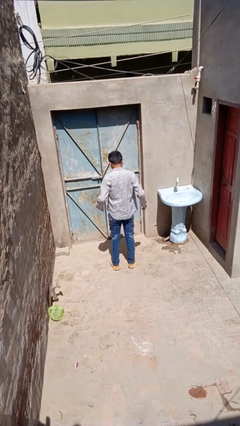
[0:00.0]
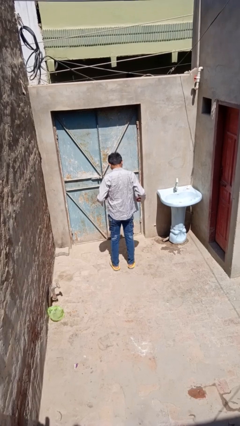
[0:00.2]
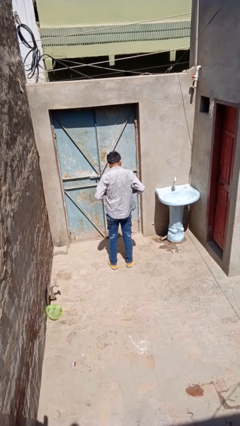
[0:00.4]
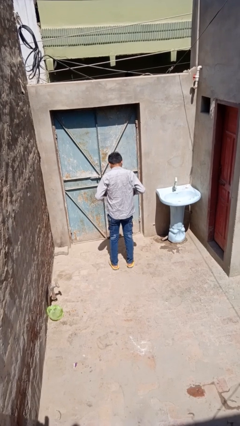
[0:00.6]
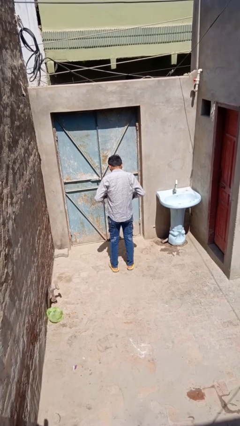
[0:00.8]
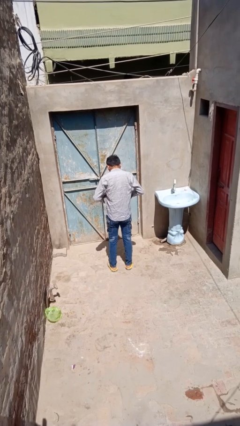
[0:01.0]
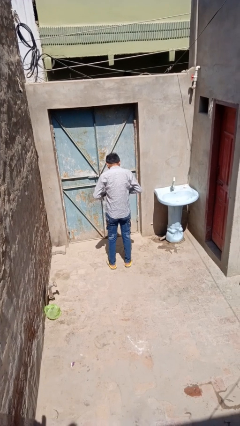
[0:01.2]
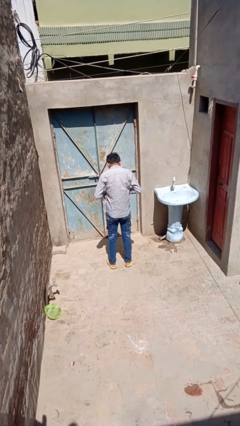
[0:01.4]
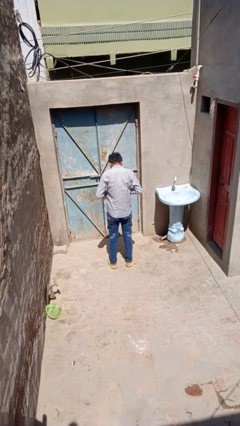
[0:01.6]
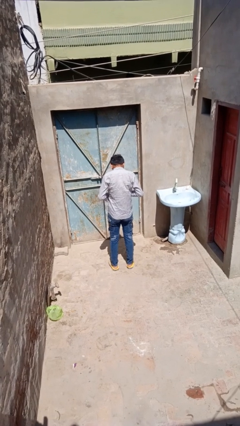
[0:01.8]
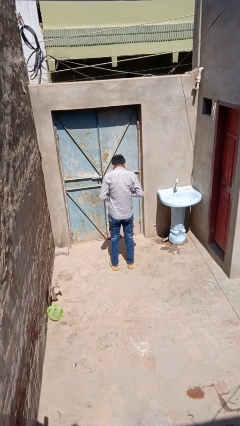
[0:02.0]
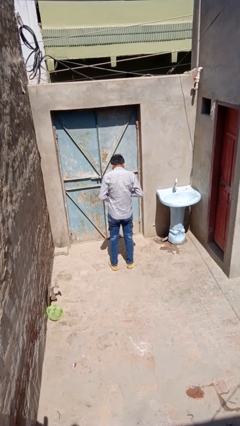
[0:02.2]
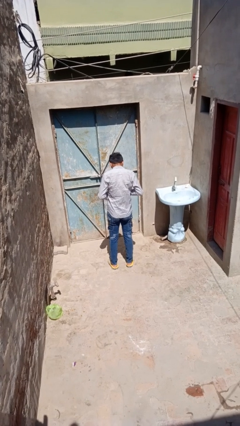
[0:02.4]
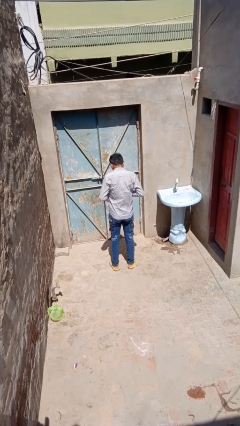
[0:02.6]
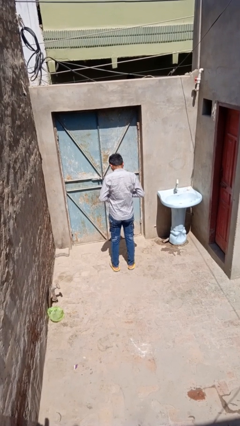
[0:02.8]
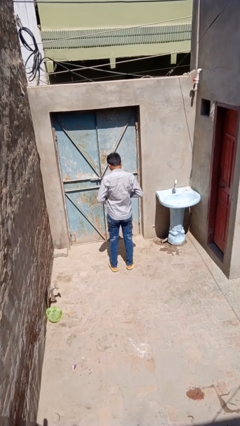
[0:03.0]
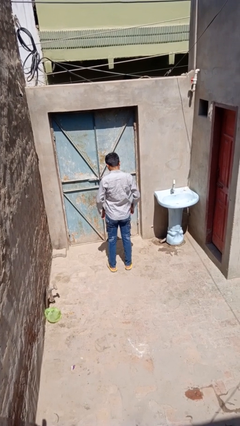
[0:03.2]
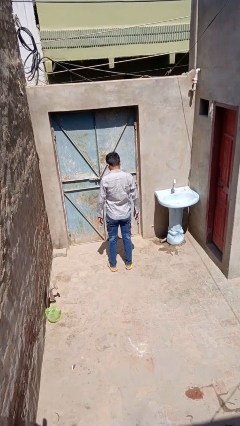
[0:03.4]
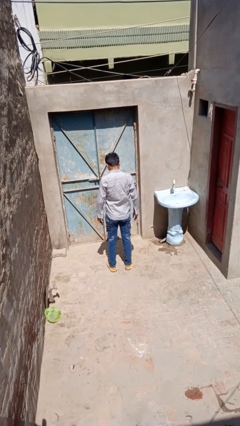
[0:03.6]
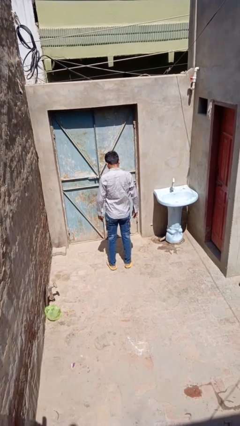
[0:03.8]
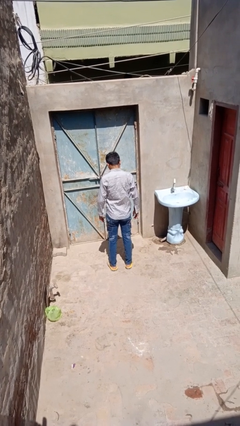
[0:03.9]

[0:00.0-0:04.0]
person buttons shirt

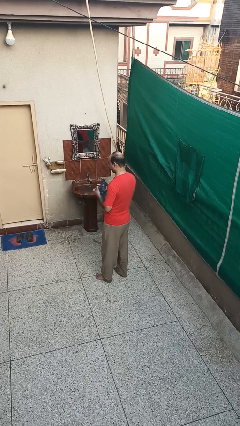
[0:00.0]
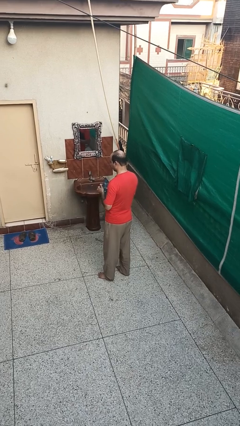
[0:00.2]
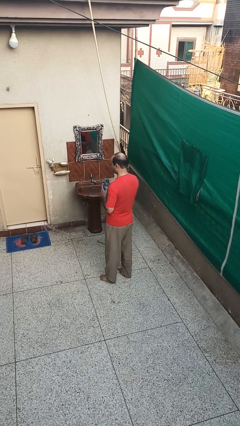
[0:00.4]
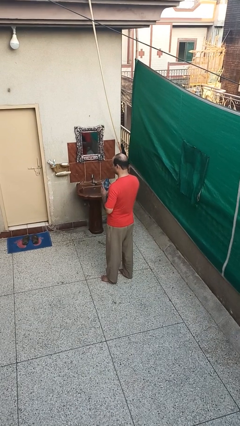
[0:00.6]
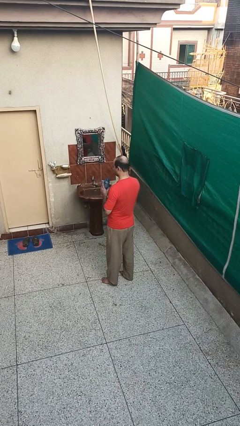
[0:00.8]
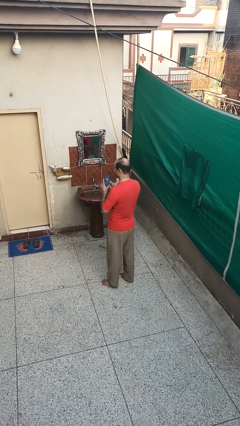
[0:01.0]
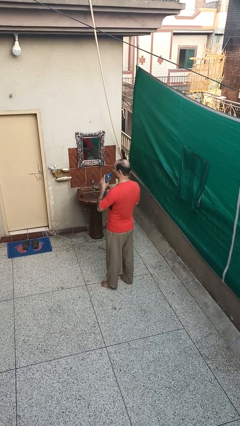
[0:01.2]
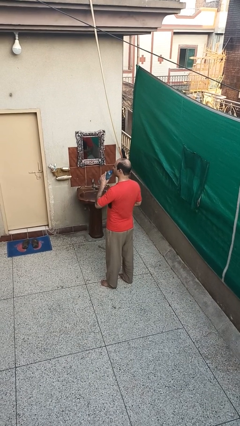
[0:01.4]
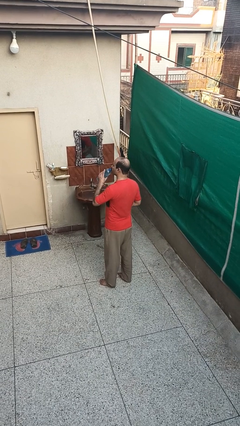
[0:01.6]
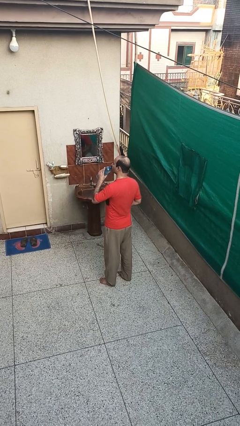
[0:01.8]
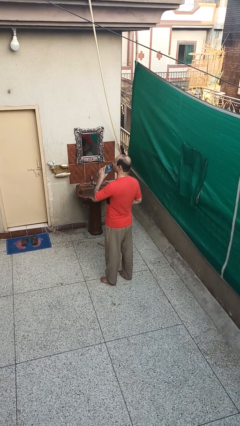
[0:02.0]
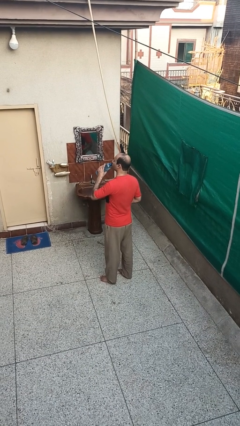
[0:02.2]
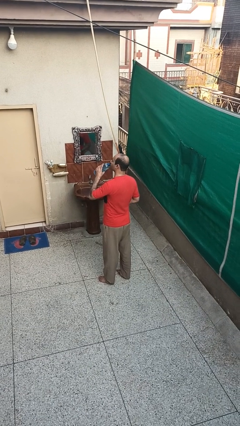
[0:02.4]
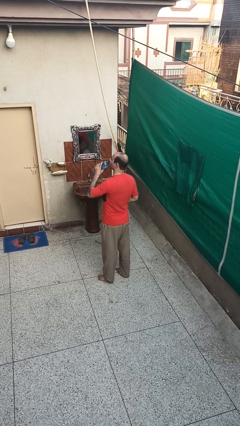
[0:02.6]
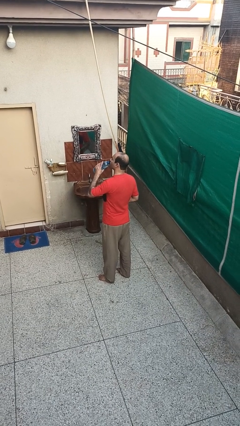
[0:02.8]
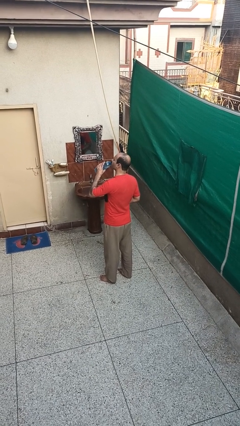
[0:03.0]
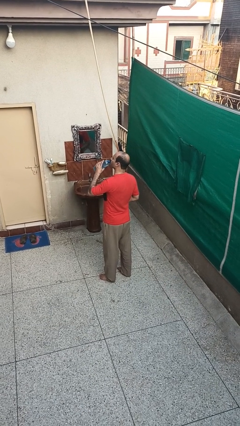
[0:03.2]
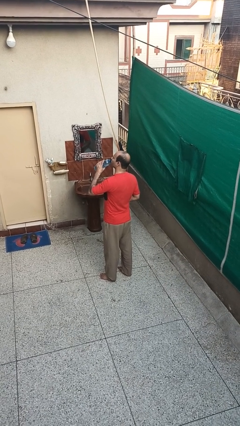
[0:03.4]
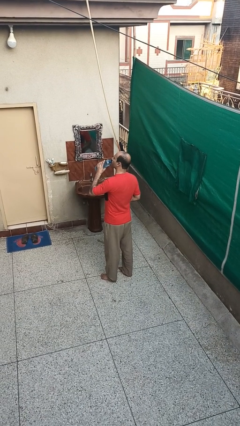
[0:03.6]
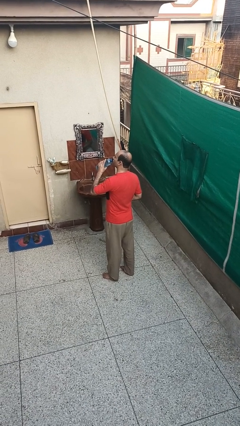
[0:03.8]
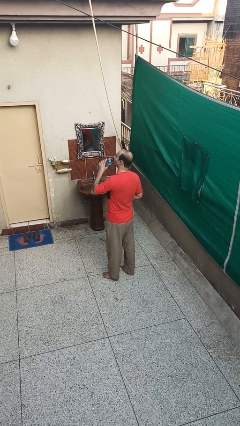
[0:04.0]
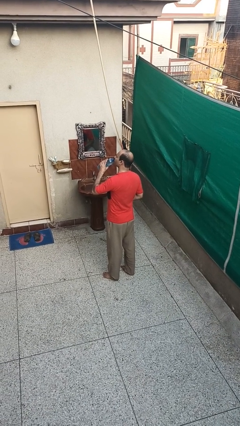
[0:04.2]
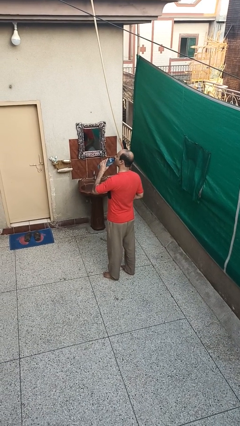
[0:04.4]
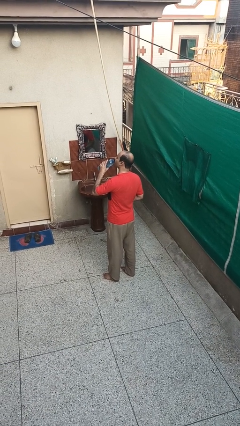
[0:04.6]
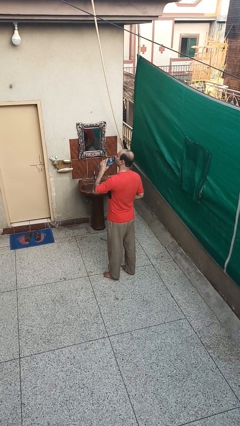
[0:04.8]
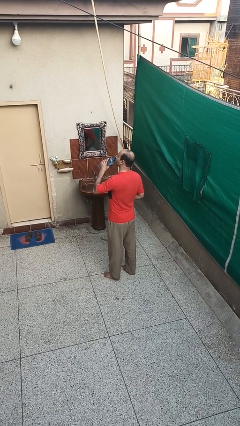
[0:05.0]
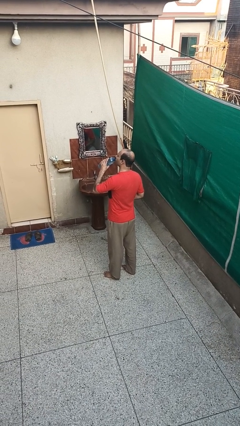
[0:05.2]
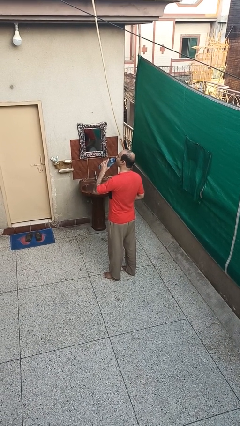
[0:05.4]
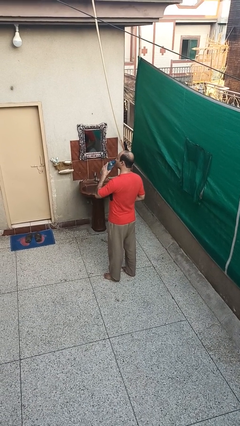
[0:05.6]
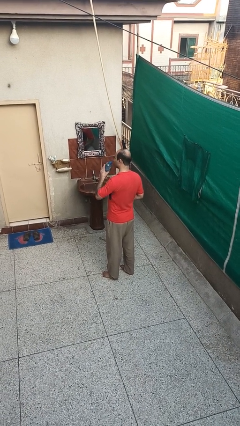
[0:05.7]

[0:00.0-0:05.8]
person drinks from bottle

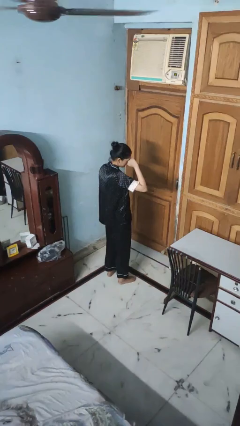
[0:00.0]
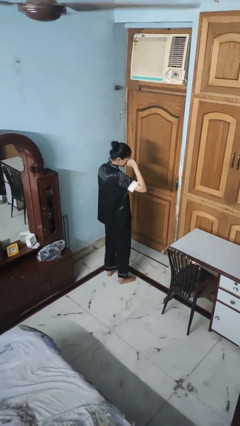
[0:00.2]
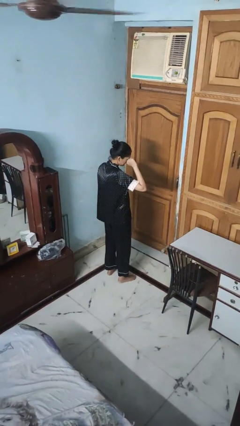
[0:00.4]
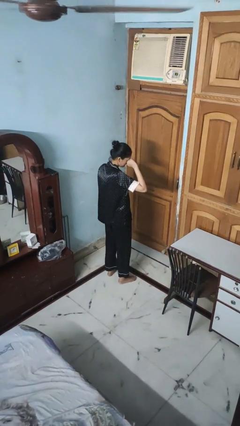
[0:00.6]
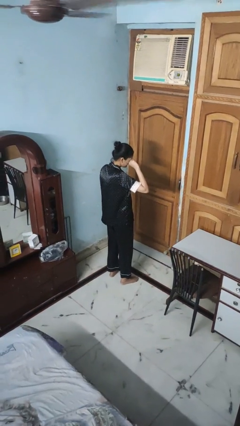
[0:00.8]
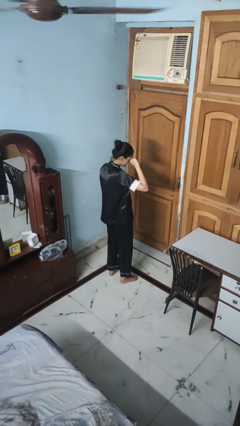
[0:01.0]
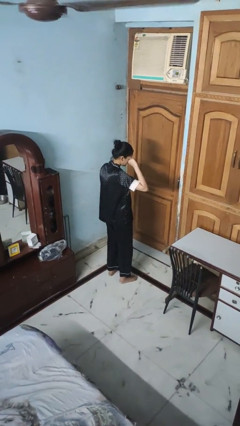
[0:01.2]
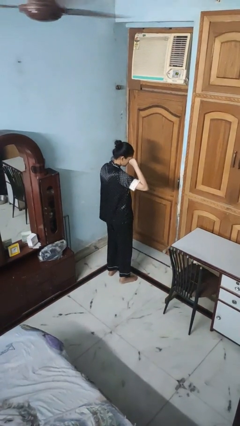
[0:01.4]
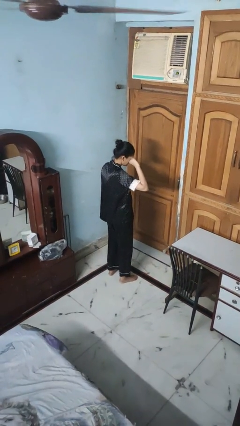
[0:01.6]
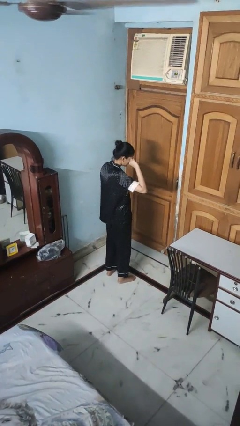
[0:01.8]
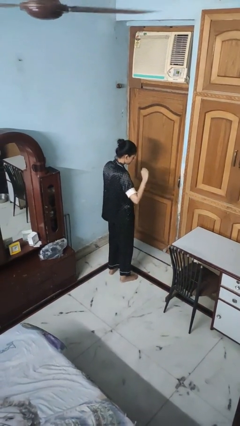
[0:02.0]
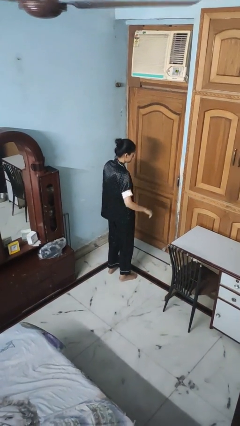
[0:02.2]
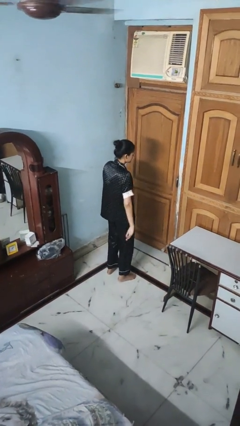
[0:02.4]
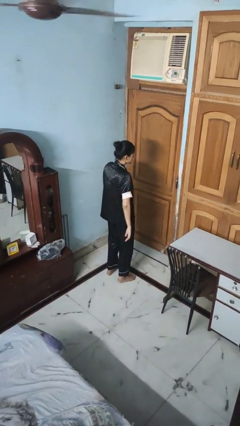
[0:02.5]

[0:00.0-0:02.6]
person rubs eyes

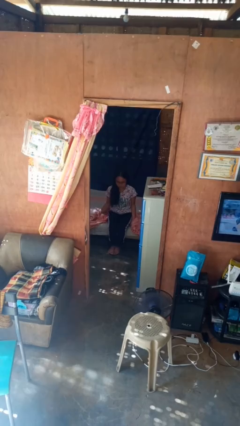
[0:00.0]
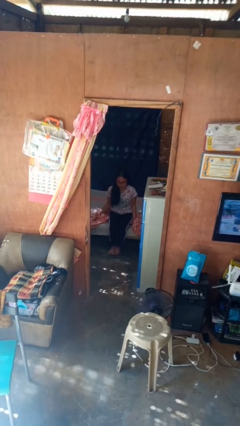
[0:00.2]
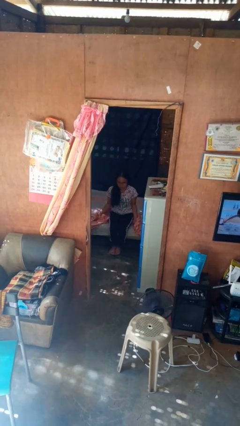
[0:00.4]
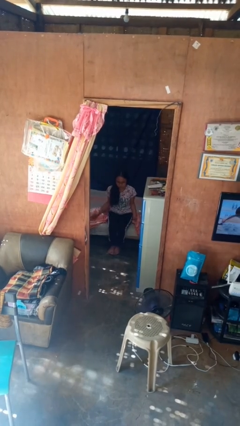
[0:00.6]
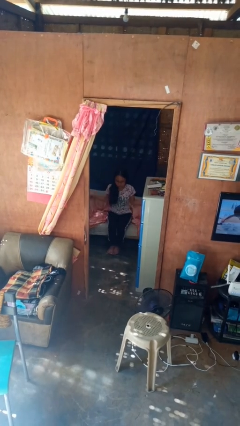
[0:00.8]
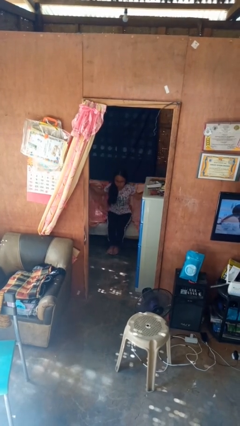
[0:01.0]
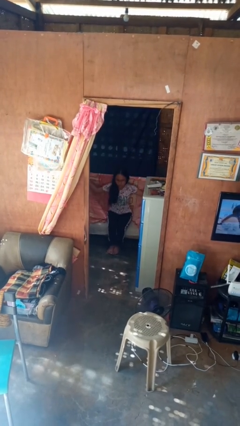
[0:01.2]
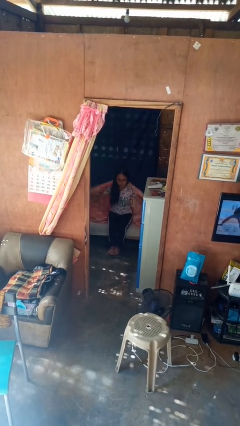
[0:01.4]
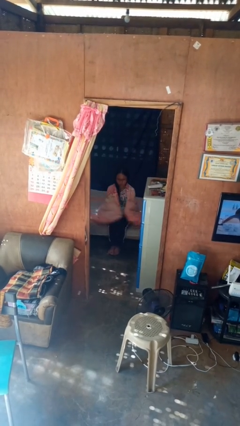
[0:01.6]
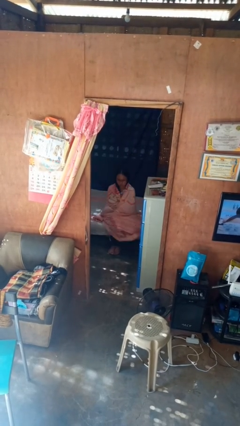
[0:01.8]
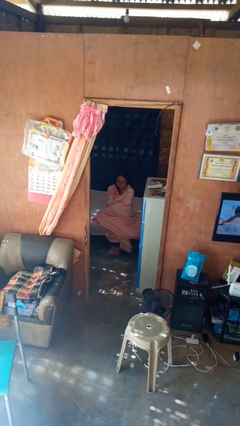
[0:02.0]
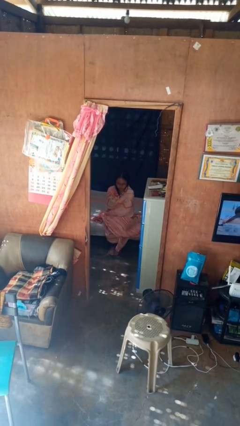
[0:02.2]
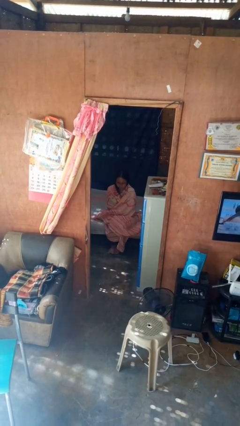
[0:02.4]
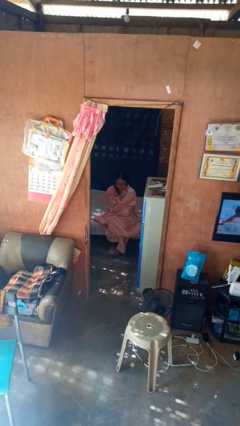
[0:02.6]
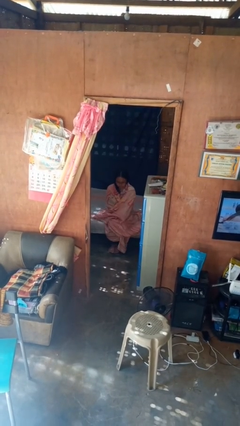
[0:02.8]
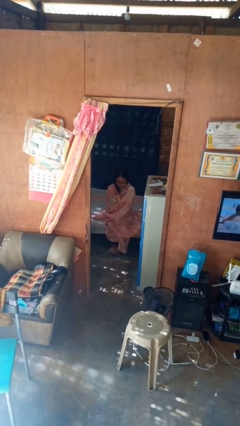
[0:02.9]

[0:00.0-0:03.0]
person covers with blanket

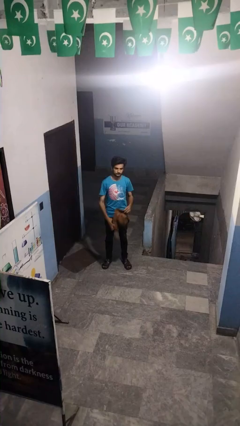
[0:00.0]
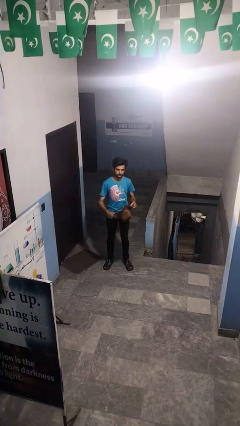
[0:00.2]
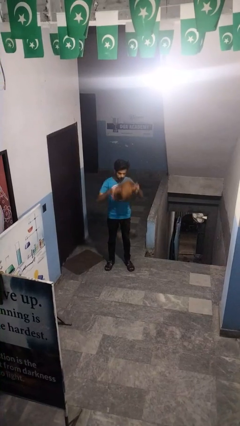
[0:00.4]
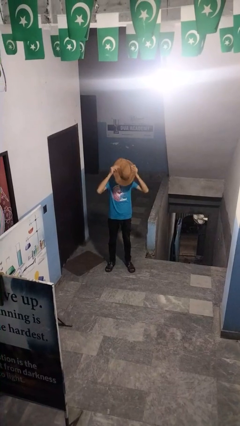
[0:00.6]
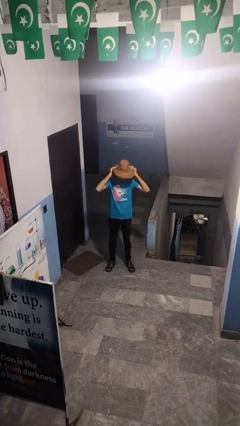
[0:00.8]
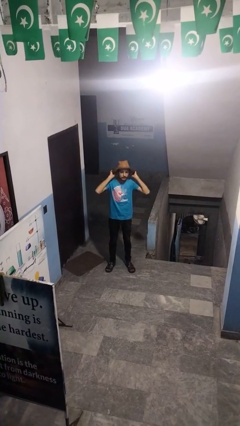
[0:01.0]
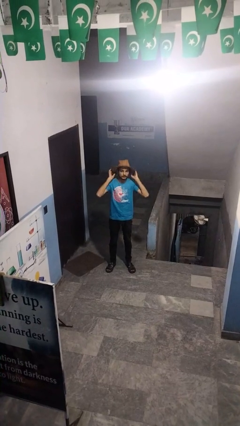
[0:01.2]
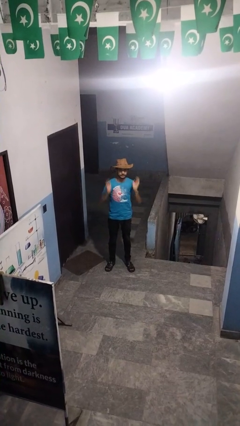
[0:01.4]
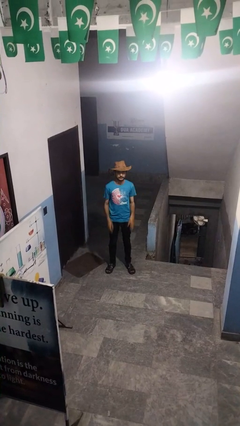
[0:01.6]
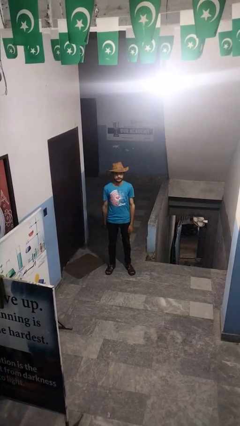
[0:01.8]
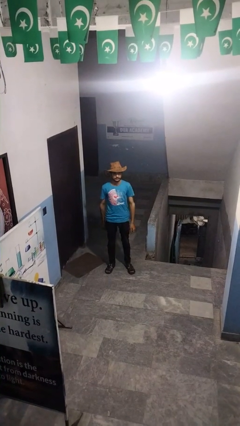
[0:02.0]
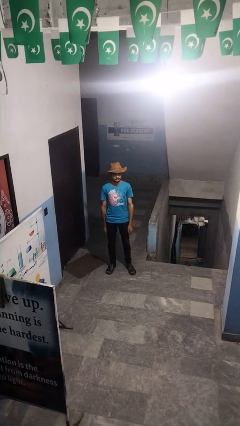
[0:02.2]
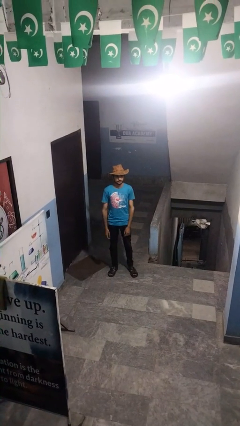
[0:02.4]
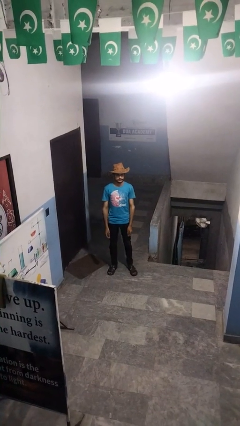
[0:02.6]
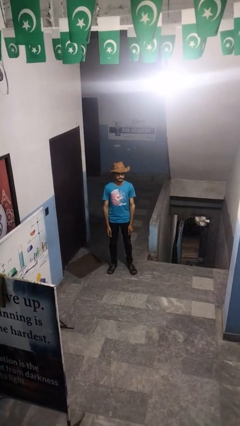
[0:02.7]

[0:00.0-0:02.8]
person puts on hat
